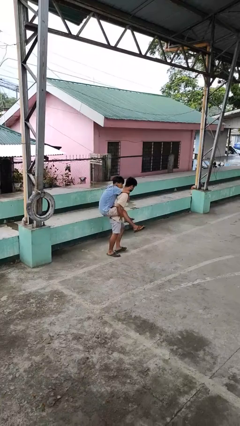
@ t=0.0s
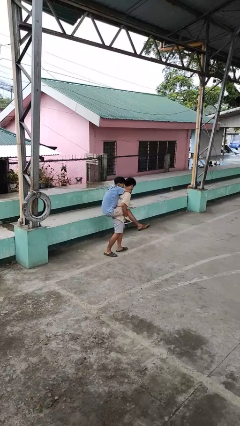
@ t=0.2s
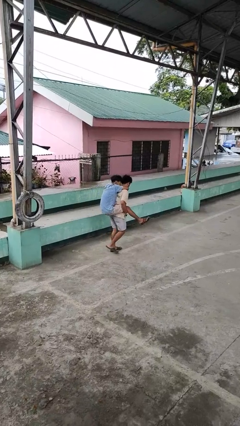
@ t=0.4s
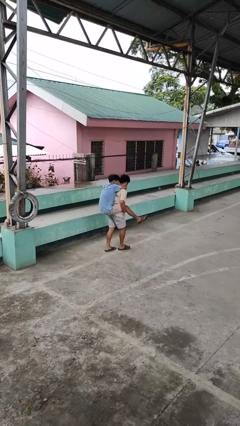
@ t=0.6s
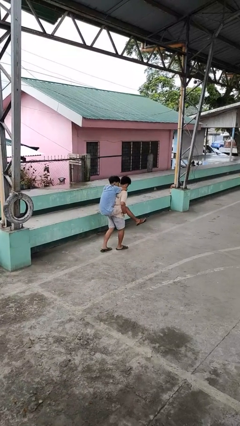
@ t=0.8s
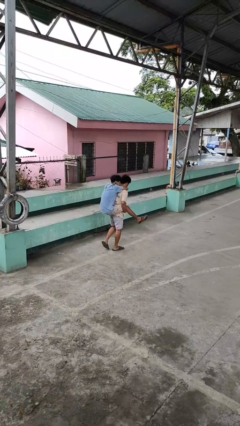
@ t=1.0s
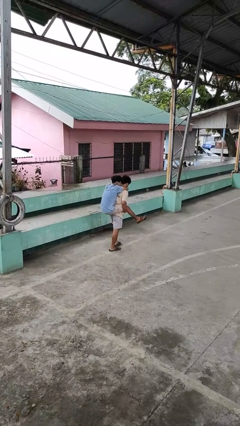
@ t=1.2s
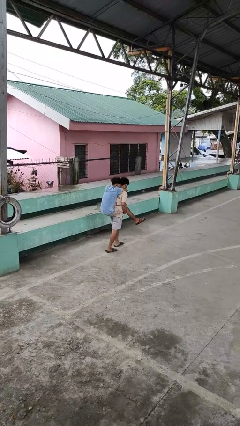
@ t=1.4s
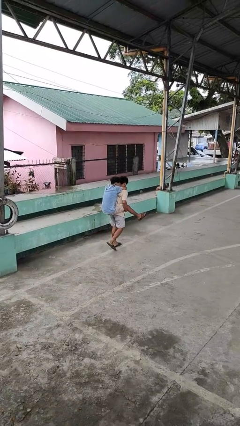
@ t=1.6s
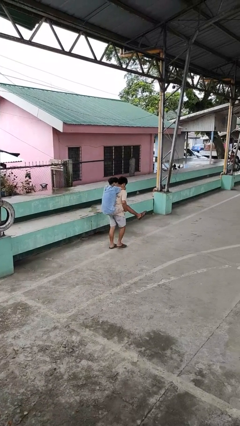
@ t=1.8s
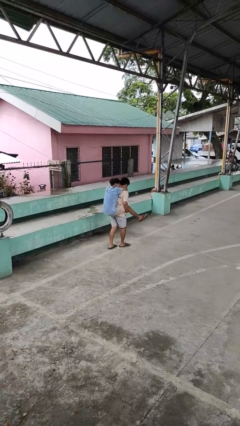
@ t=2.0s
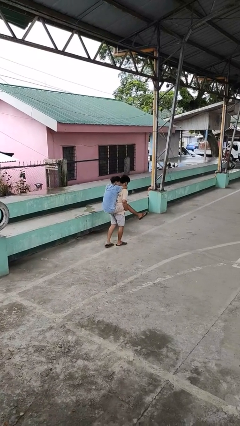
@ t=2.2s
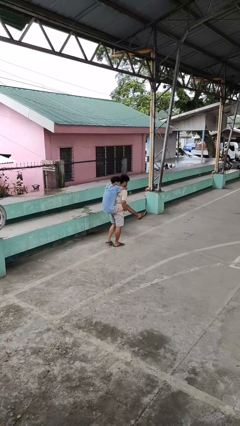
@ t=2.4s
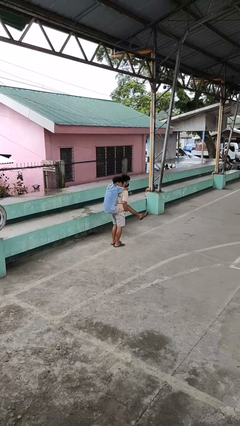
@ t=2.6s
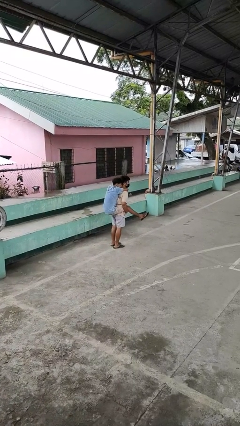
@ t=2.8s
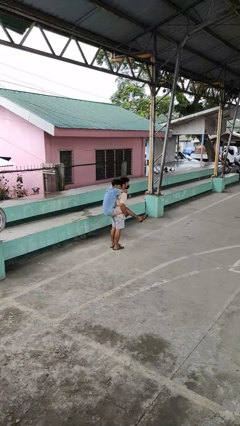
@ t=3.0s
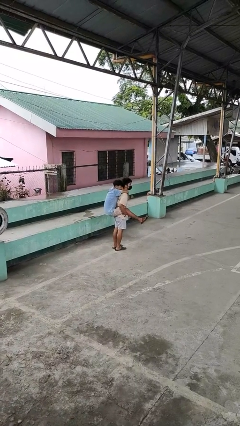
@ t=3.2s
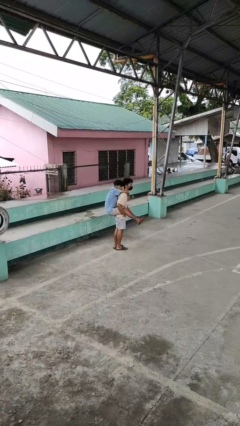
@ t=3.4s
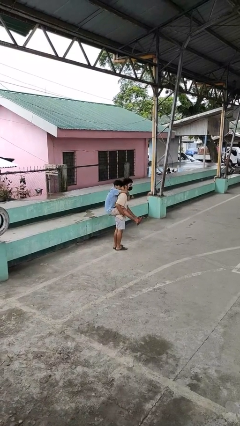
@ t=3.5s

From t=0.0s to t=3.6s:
person carries person on back

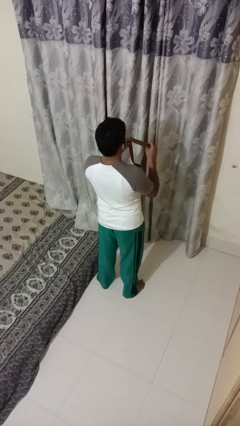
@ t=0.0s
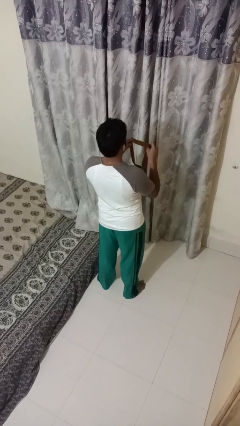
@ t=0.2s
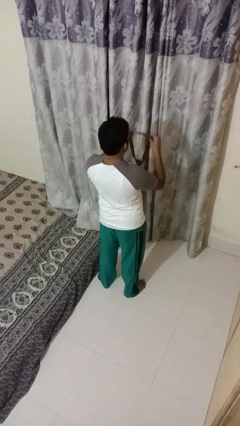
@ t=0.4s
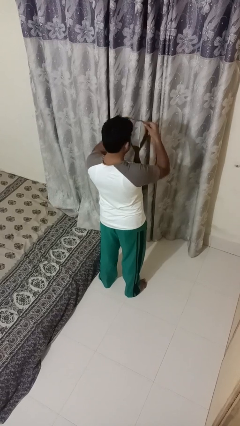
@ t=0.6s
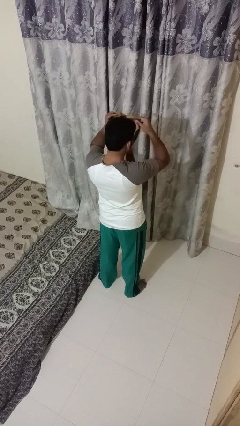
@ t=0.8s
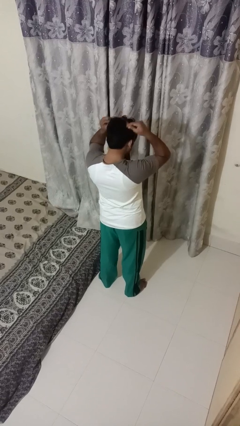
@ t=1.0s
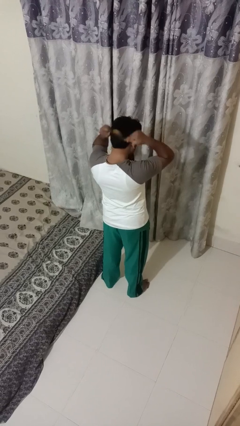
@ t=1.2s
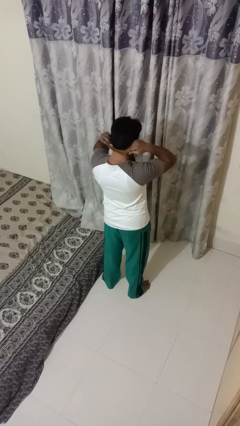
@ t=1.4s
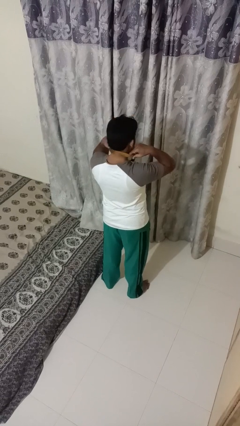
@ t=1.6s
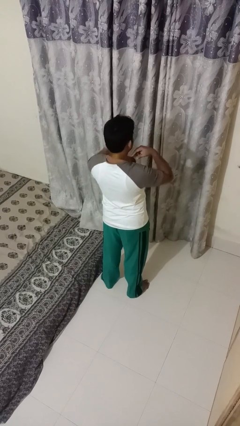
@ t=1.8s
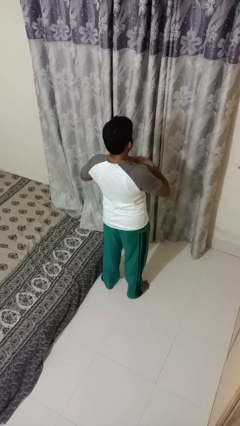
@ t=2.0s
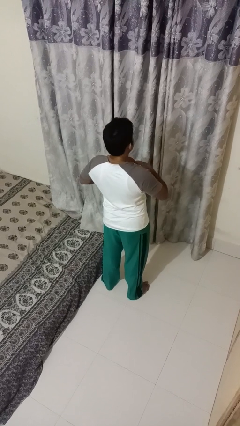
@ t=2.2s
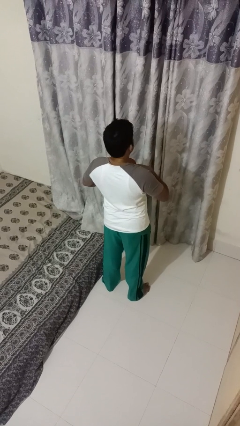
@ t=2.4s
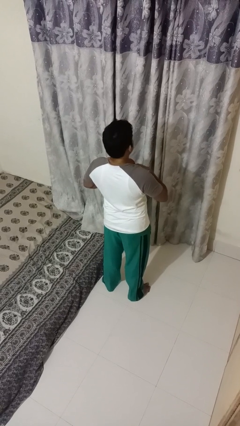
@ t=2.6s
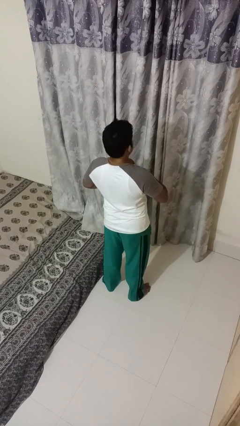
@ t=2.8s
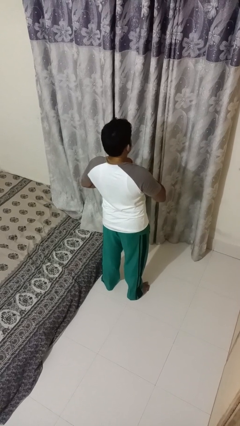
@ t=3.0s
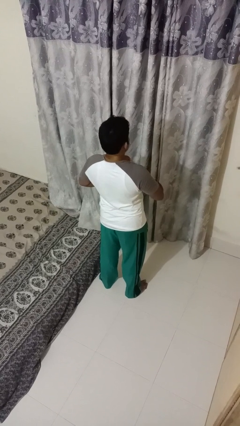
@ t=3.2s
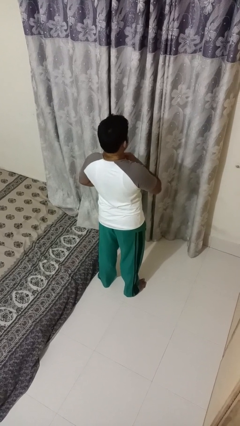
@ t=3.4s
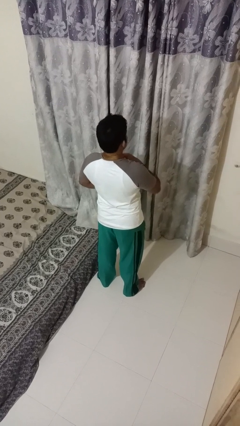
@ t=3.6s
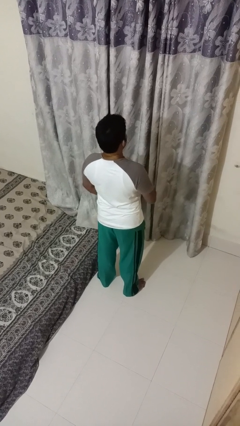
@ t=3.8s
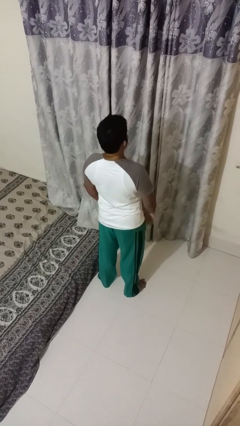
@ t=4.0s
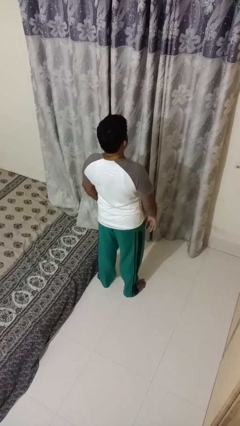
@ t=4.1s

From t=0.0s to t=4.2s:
person puts on necktie

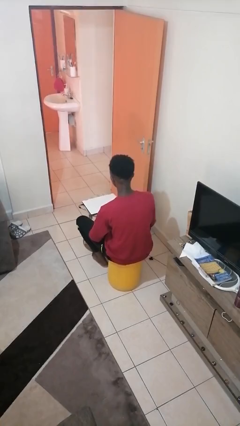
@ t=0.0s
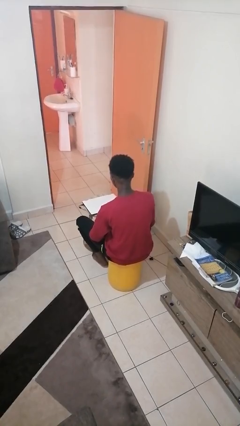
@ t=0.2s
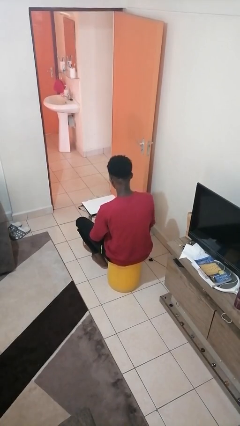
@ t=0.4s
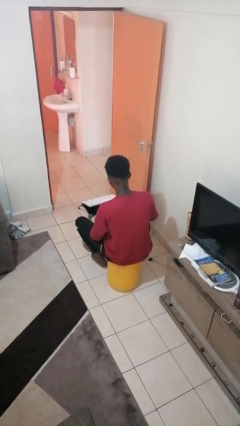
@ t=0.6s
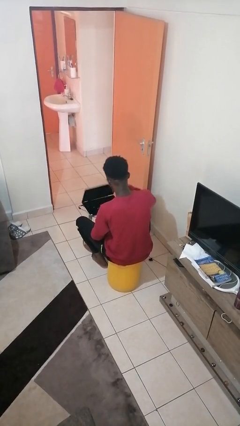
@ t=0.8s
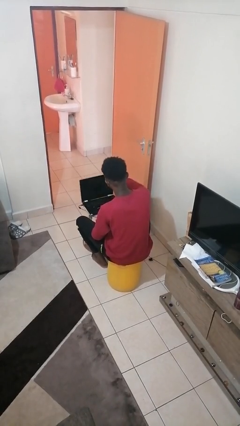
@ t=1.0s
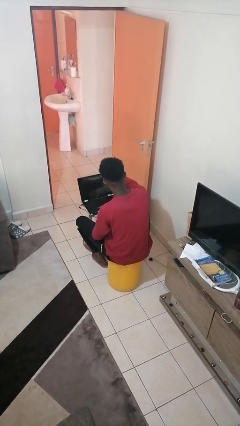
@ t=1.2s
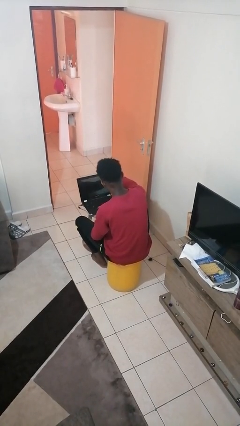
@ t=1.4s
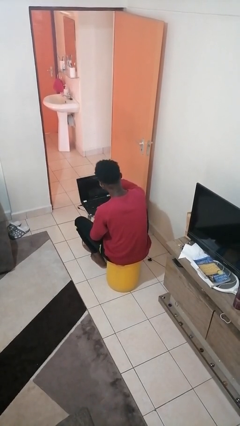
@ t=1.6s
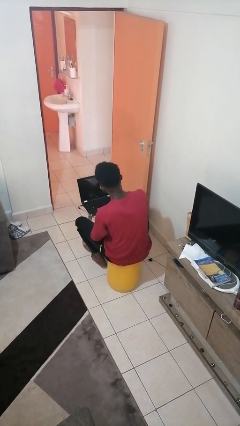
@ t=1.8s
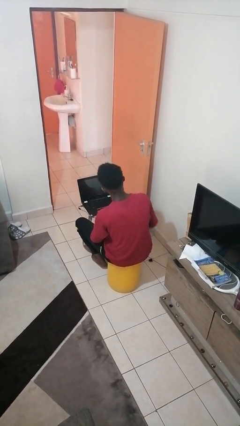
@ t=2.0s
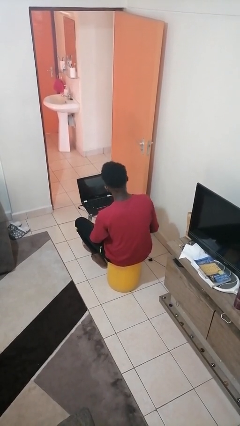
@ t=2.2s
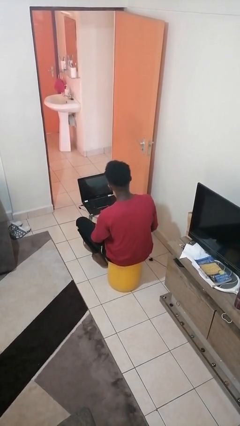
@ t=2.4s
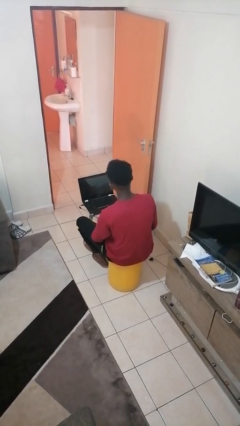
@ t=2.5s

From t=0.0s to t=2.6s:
person opens laptop

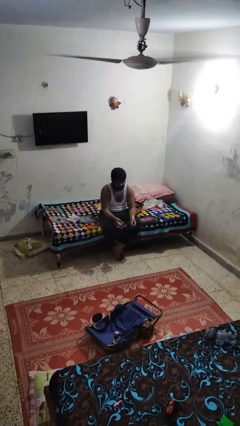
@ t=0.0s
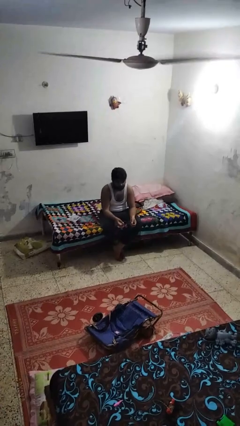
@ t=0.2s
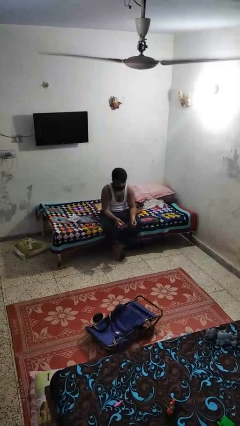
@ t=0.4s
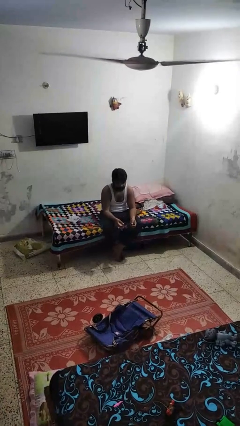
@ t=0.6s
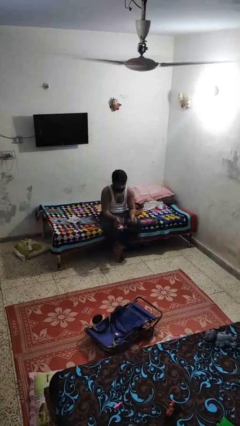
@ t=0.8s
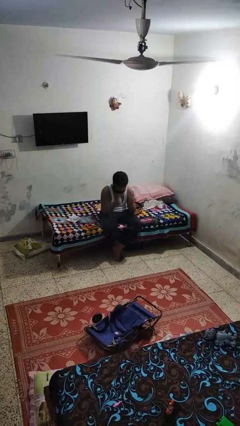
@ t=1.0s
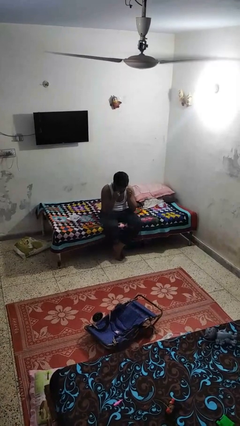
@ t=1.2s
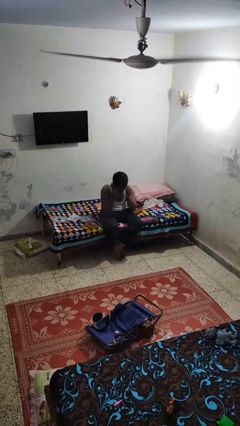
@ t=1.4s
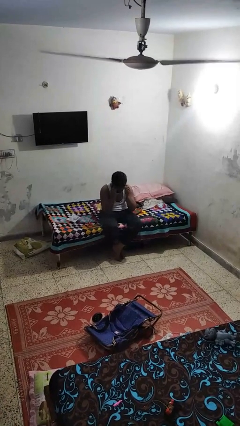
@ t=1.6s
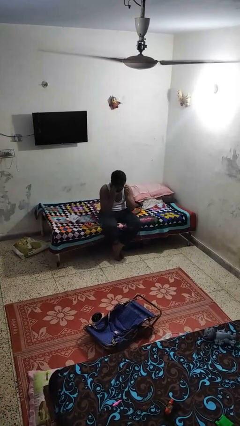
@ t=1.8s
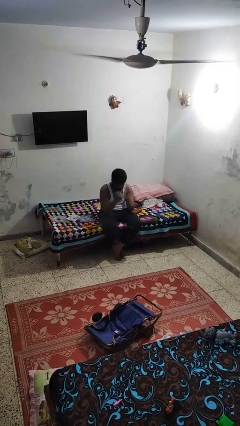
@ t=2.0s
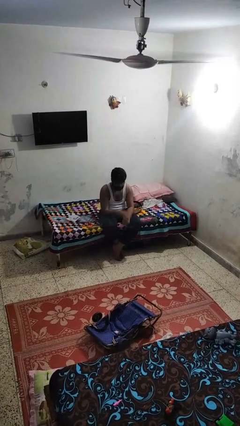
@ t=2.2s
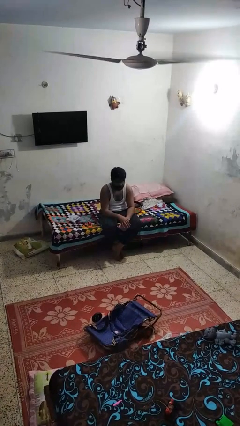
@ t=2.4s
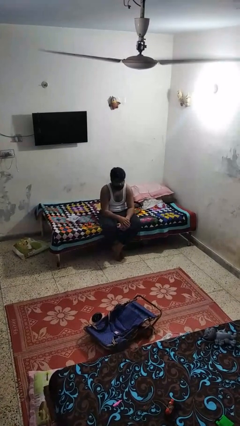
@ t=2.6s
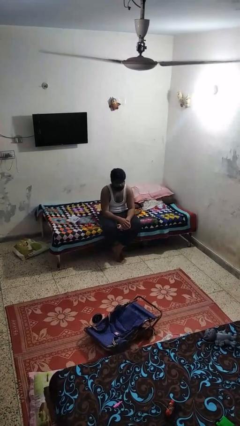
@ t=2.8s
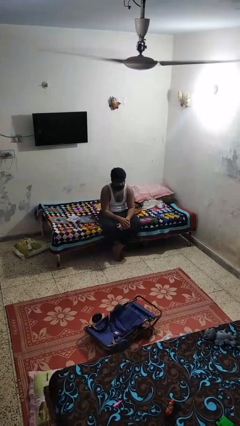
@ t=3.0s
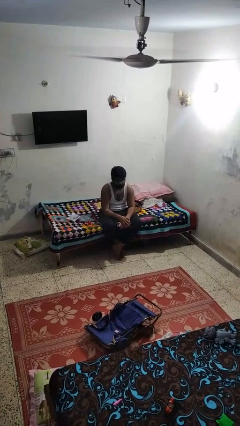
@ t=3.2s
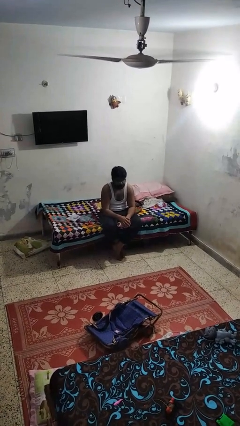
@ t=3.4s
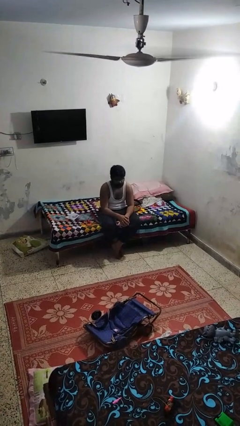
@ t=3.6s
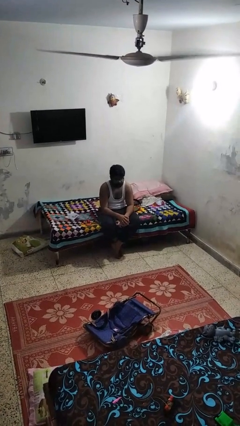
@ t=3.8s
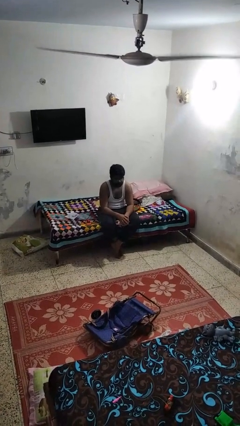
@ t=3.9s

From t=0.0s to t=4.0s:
person puts on glasses

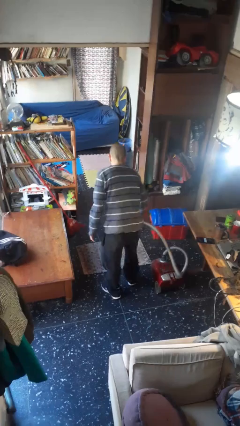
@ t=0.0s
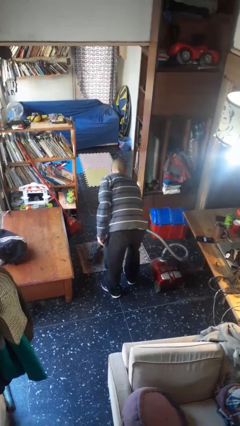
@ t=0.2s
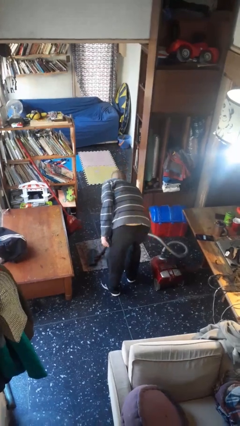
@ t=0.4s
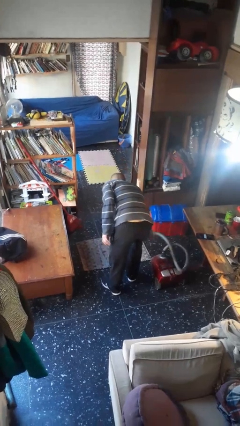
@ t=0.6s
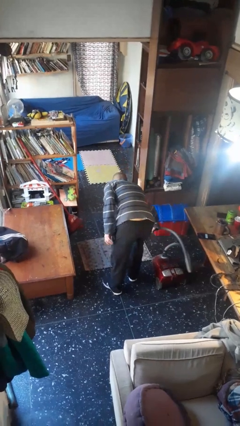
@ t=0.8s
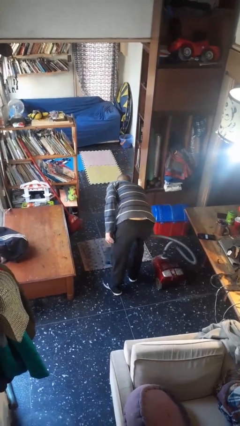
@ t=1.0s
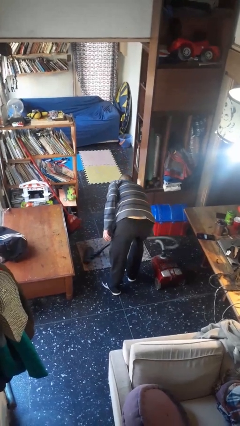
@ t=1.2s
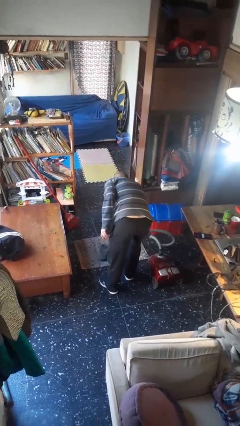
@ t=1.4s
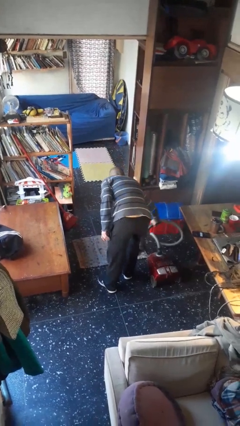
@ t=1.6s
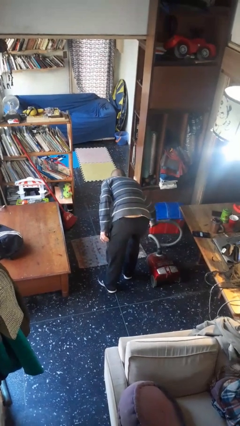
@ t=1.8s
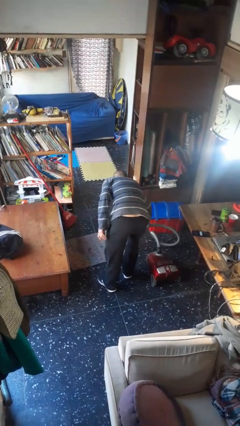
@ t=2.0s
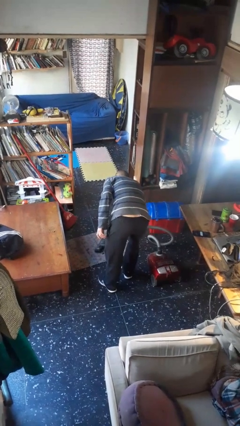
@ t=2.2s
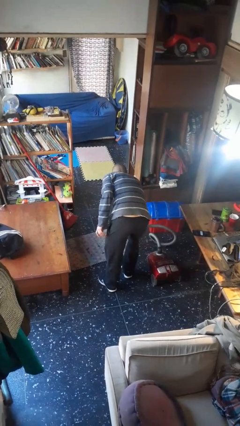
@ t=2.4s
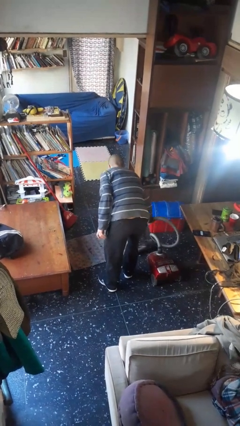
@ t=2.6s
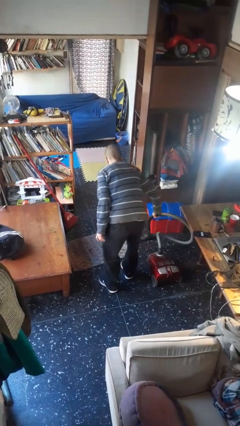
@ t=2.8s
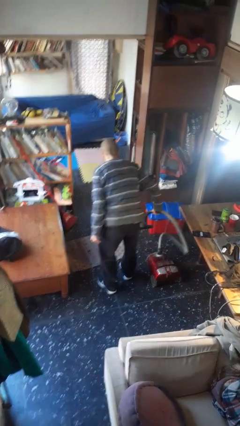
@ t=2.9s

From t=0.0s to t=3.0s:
person vacuums carpet
